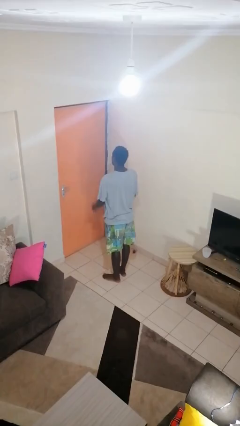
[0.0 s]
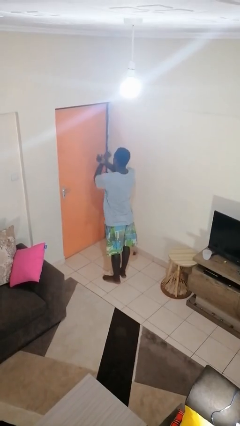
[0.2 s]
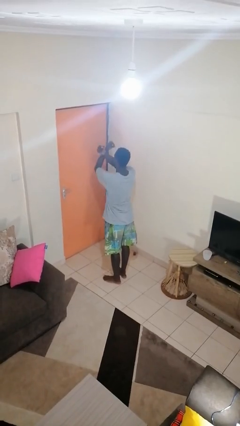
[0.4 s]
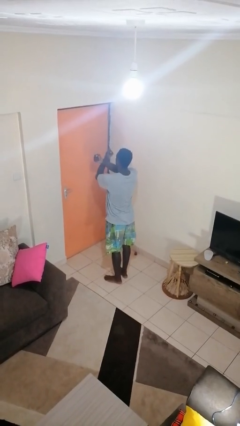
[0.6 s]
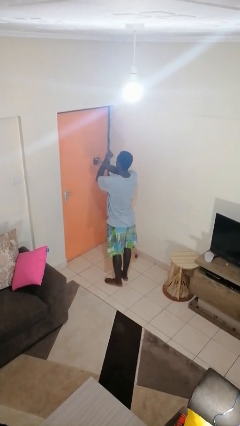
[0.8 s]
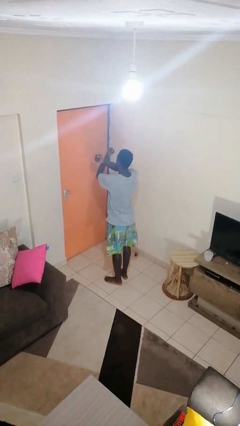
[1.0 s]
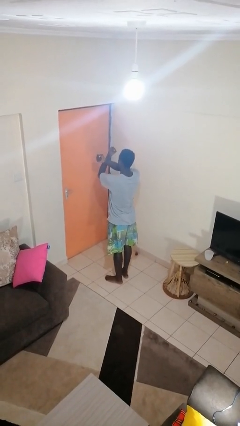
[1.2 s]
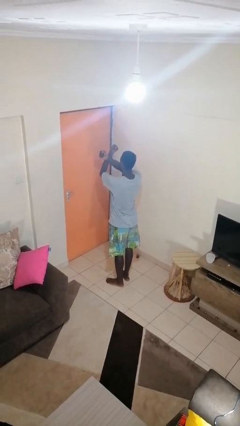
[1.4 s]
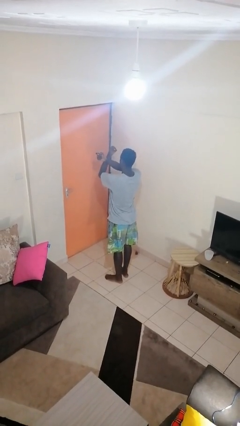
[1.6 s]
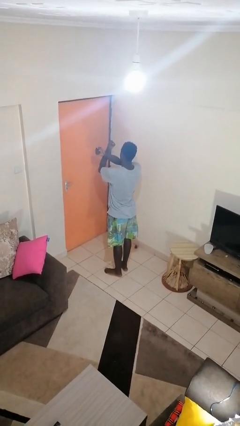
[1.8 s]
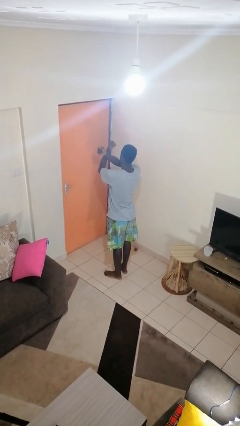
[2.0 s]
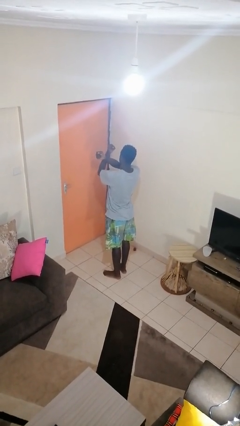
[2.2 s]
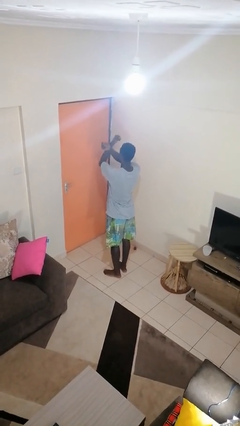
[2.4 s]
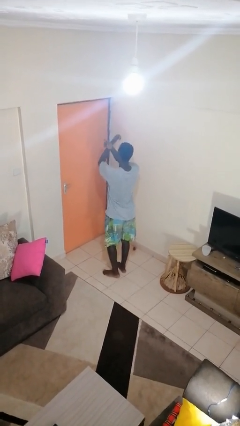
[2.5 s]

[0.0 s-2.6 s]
person gestures arms x

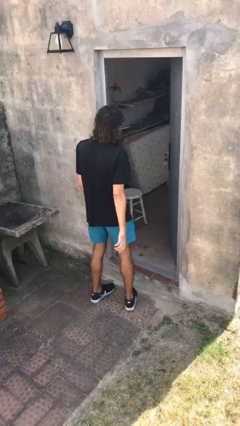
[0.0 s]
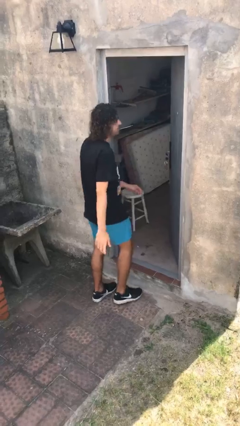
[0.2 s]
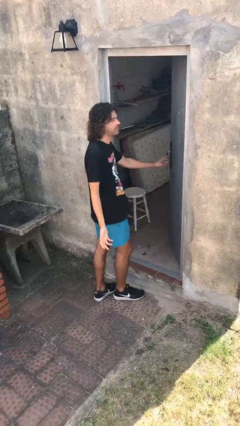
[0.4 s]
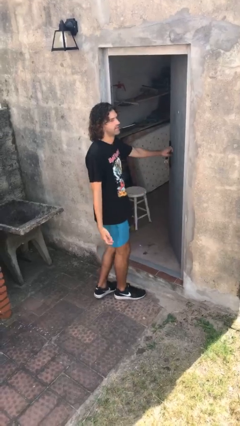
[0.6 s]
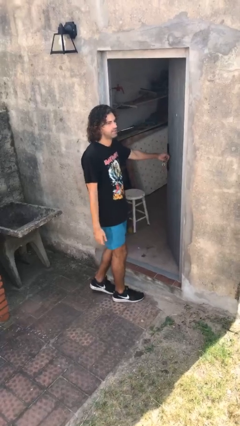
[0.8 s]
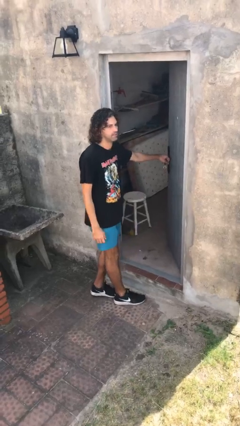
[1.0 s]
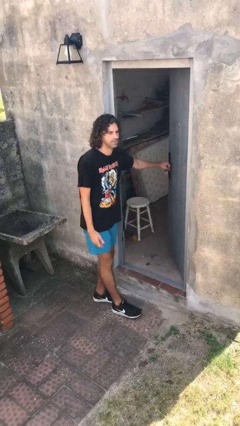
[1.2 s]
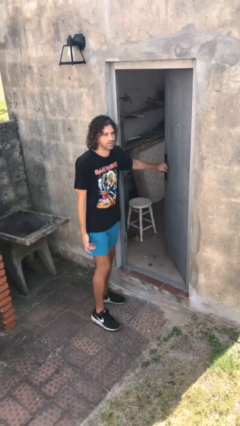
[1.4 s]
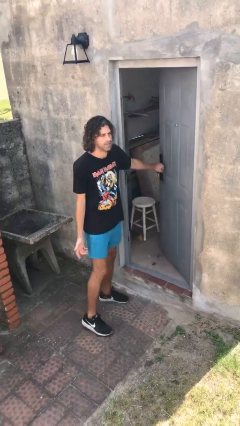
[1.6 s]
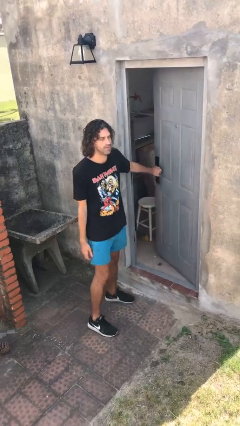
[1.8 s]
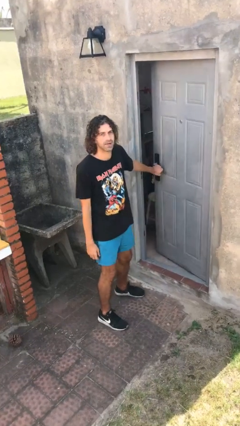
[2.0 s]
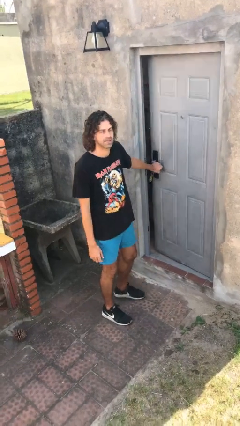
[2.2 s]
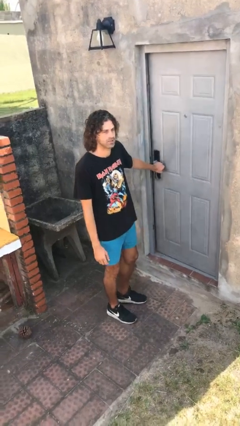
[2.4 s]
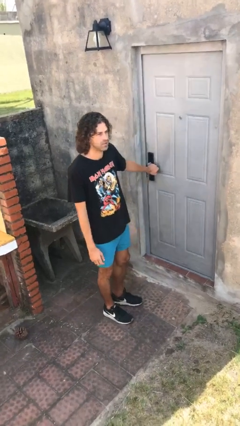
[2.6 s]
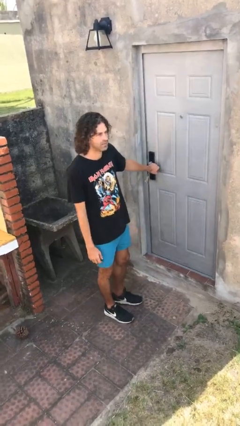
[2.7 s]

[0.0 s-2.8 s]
person closes facility door

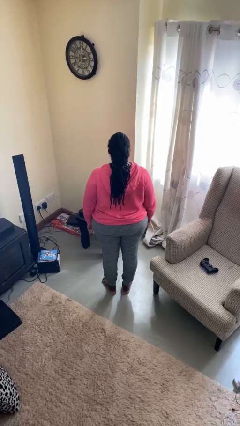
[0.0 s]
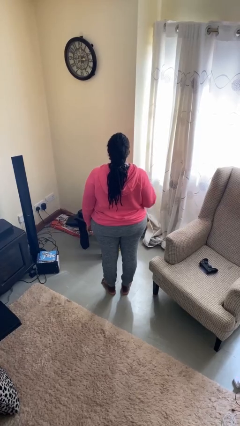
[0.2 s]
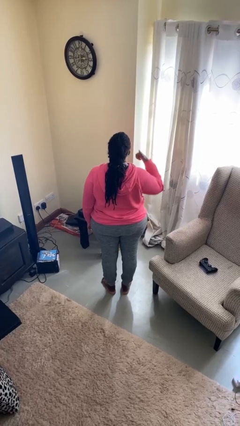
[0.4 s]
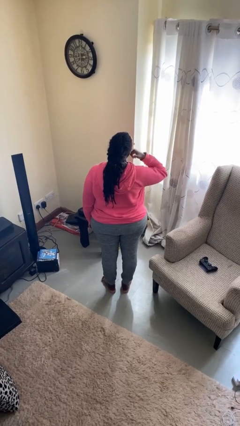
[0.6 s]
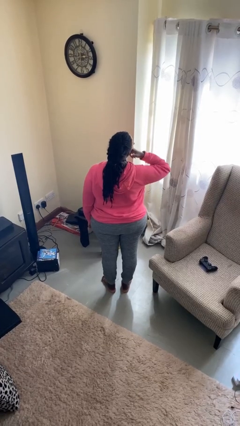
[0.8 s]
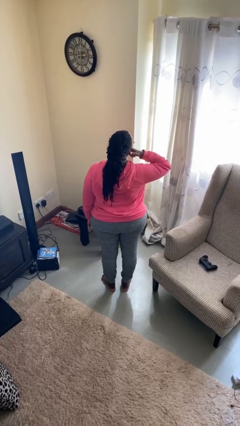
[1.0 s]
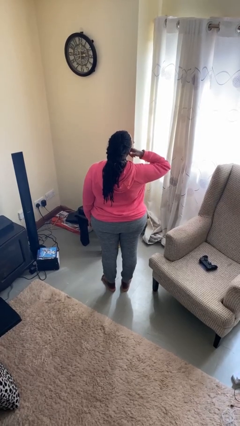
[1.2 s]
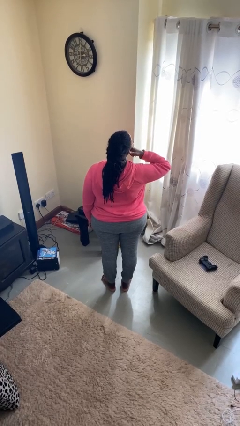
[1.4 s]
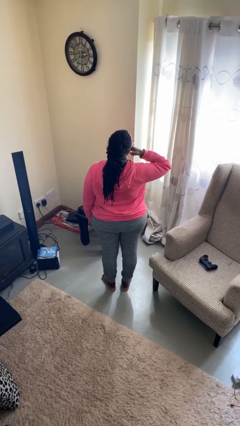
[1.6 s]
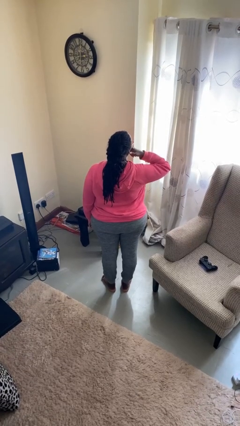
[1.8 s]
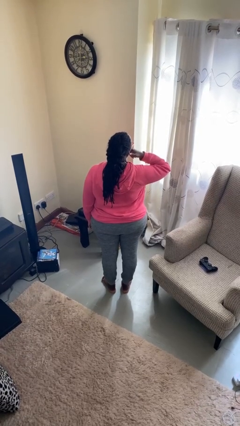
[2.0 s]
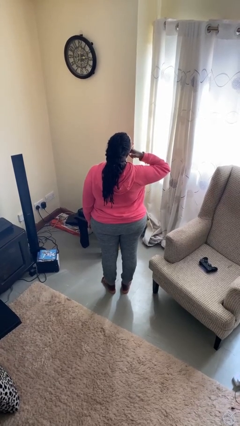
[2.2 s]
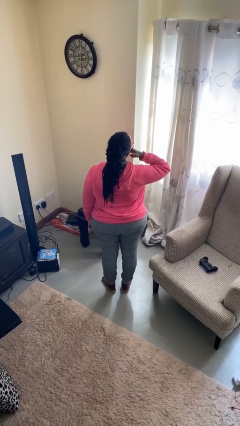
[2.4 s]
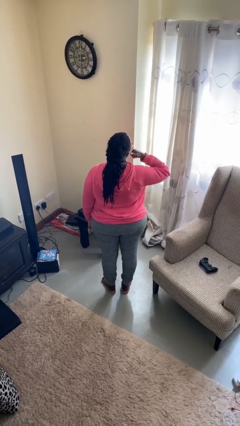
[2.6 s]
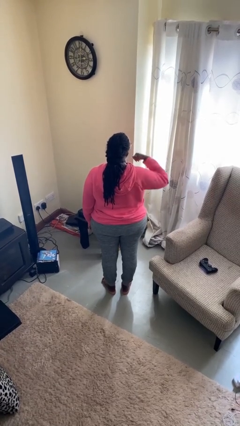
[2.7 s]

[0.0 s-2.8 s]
person gestures call me

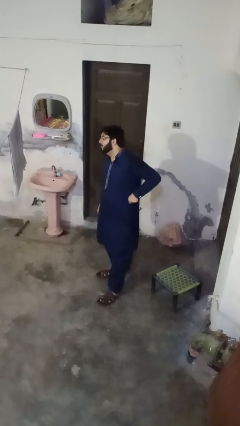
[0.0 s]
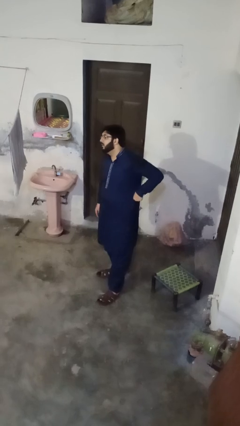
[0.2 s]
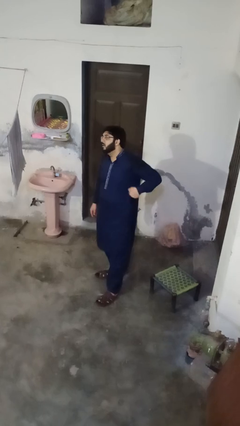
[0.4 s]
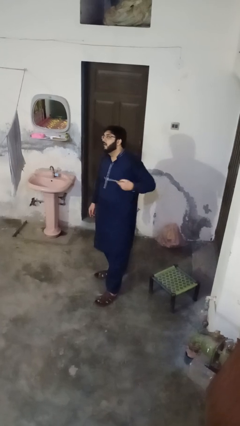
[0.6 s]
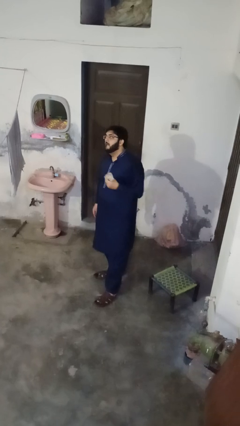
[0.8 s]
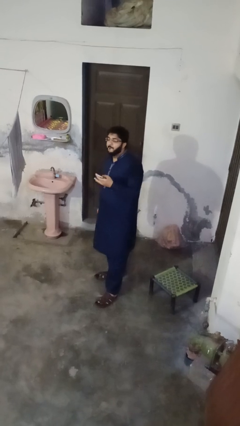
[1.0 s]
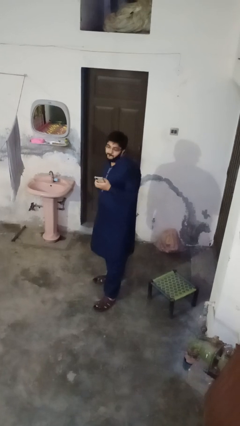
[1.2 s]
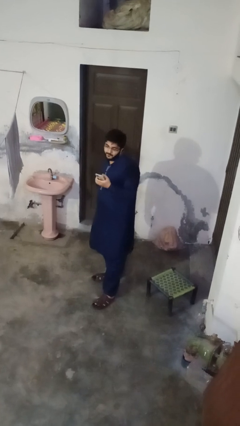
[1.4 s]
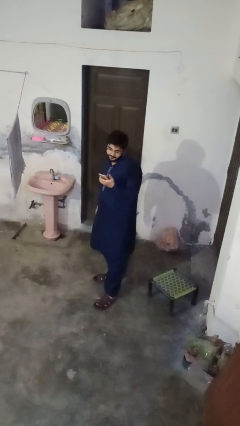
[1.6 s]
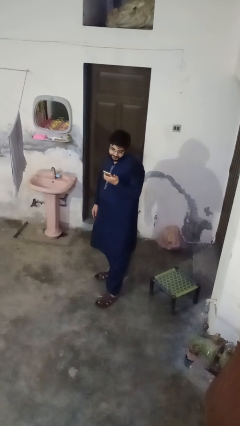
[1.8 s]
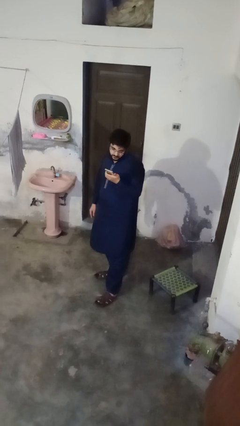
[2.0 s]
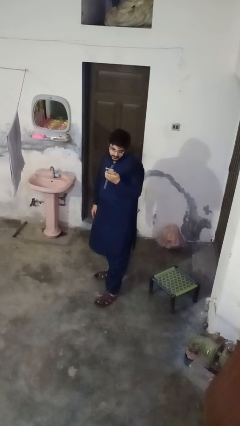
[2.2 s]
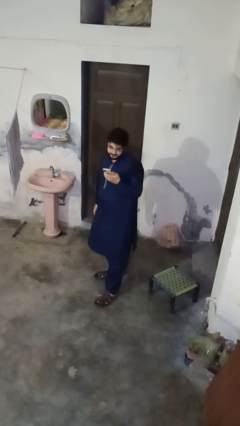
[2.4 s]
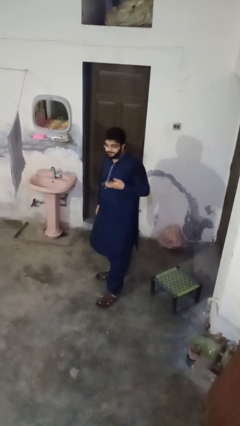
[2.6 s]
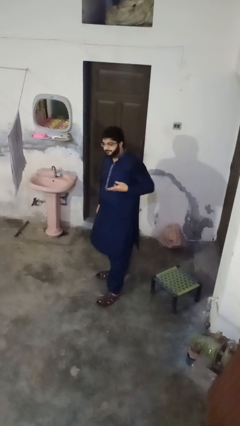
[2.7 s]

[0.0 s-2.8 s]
person takes phone from pocket

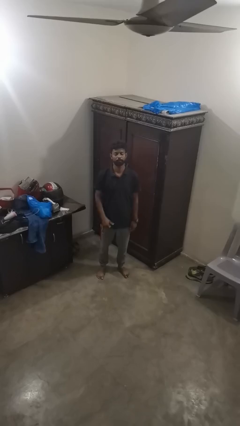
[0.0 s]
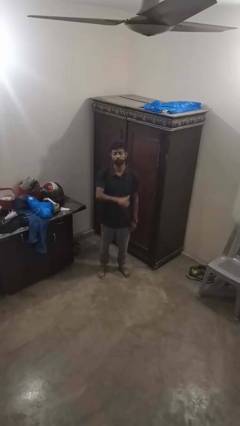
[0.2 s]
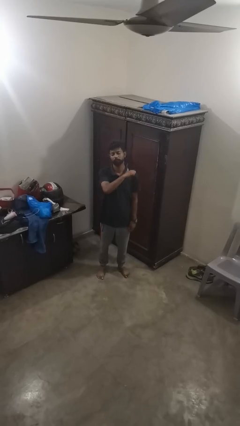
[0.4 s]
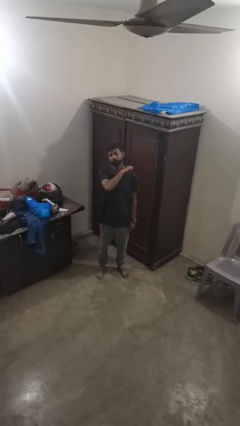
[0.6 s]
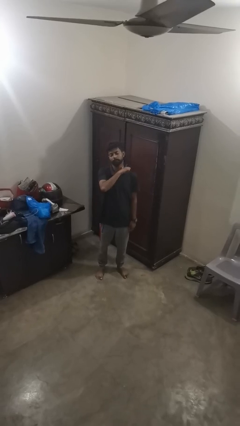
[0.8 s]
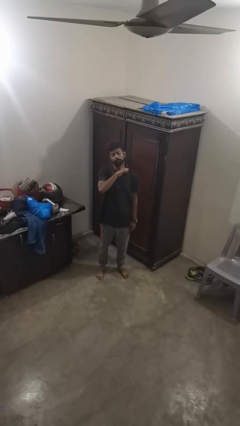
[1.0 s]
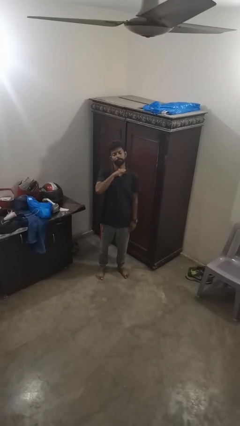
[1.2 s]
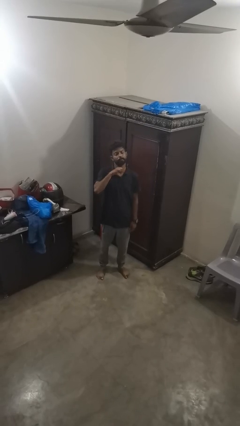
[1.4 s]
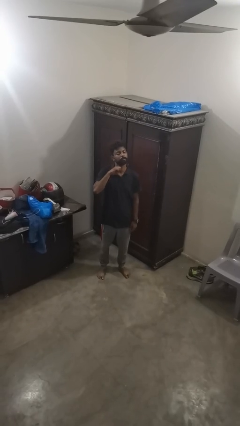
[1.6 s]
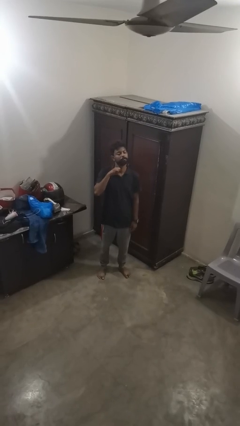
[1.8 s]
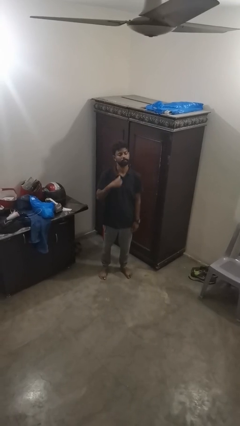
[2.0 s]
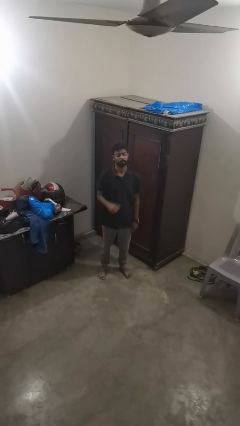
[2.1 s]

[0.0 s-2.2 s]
person gestures cut

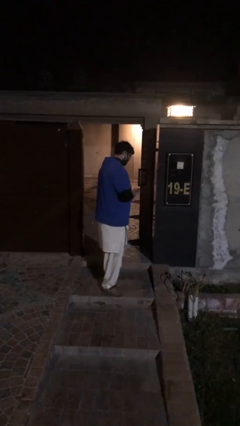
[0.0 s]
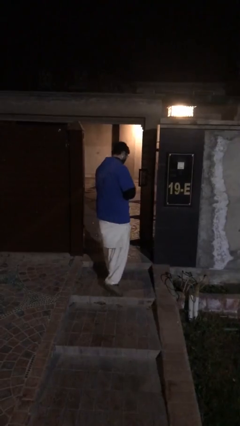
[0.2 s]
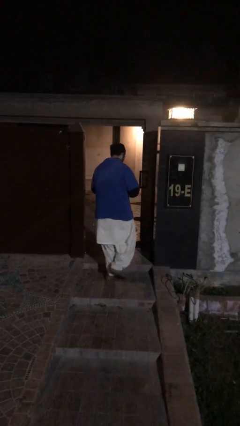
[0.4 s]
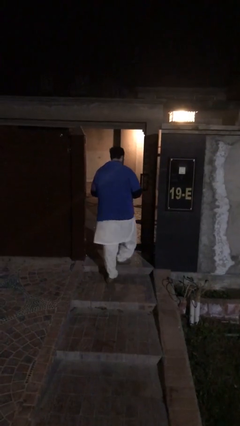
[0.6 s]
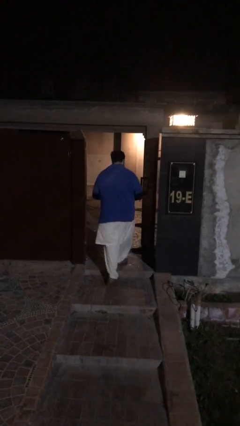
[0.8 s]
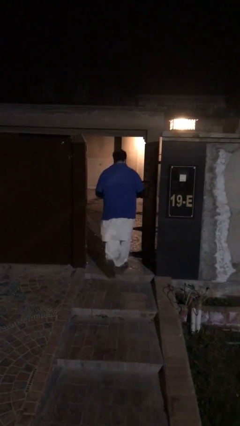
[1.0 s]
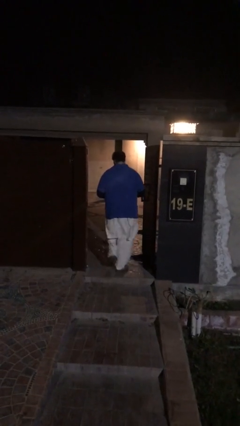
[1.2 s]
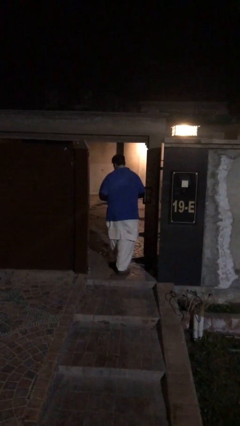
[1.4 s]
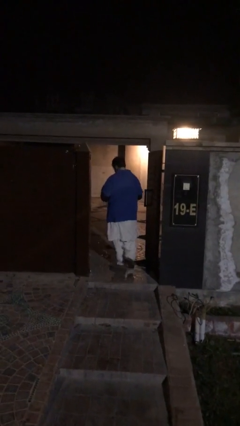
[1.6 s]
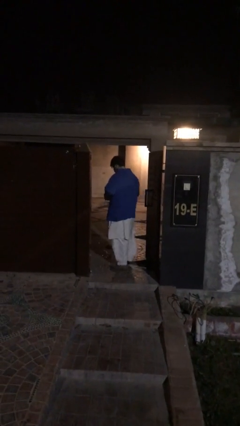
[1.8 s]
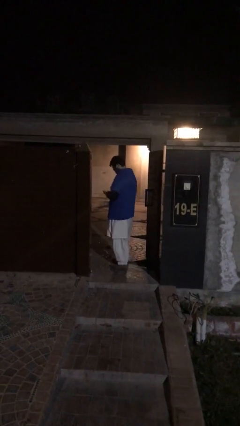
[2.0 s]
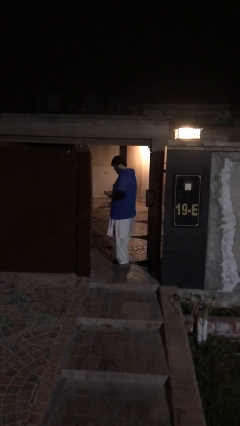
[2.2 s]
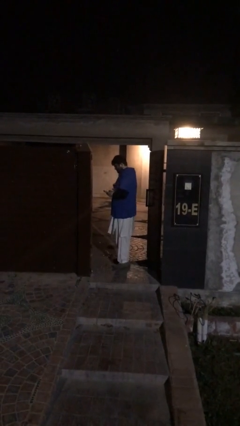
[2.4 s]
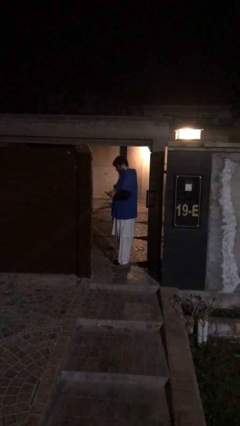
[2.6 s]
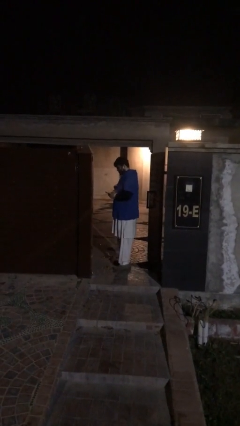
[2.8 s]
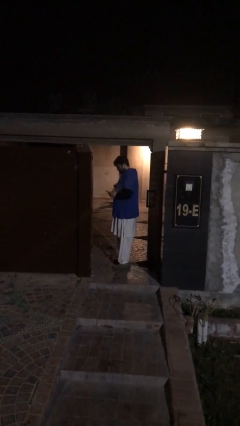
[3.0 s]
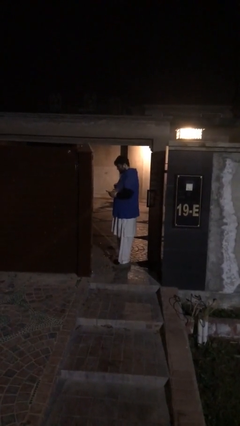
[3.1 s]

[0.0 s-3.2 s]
person exits scene through structure

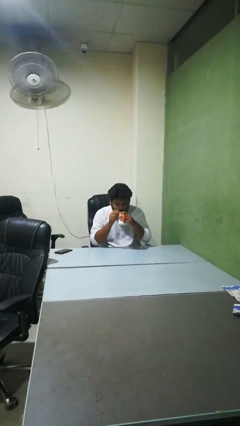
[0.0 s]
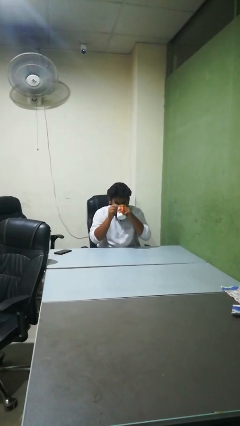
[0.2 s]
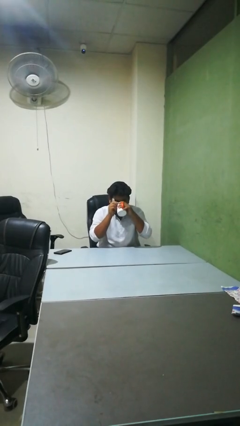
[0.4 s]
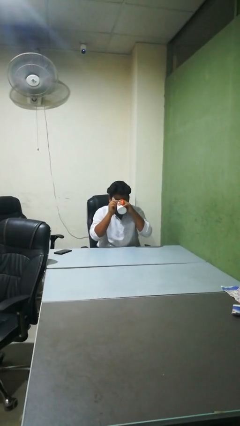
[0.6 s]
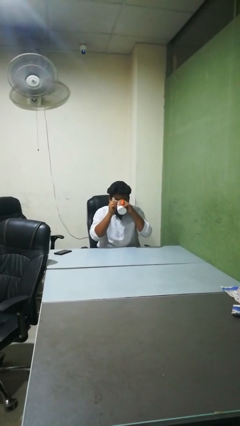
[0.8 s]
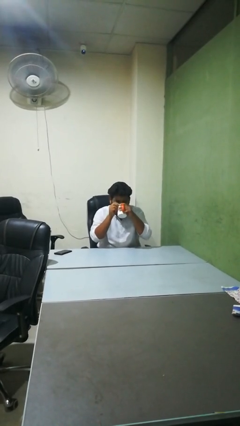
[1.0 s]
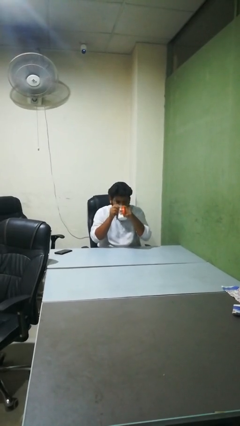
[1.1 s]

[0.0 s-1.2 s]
person drinks from mug
